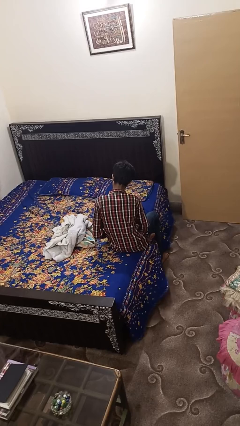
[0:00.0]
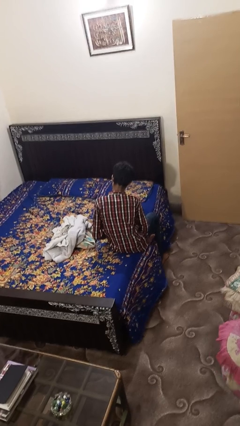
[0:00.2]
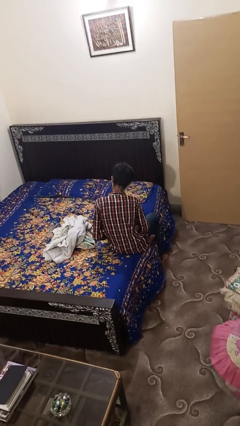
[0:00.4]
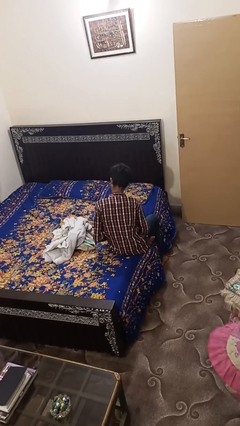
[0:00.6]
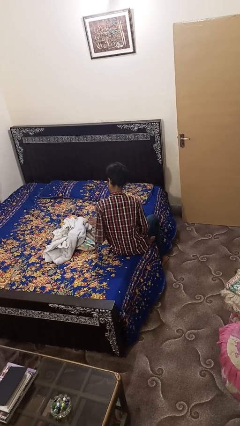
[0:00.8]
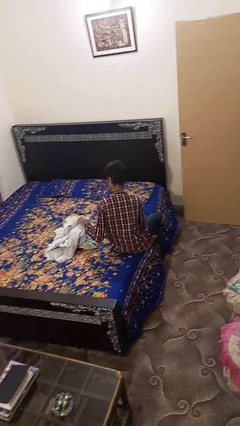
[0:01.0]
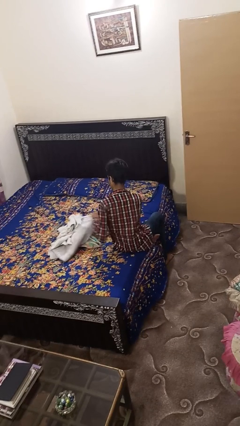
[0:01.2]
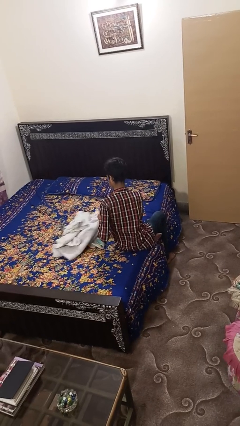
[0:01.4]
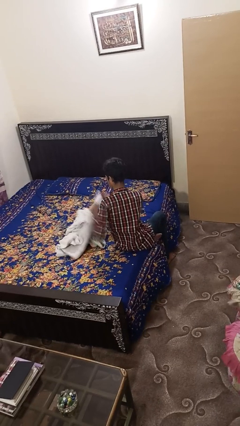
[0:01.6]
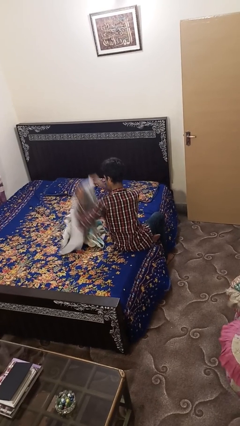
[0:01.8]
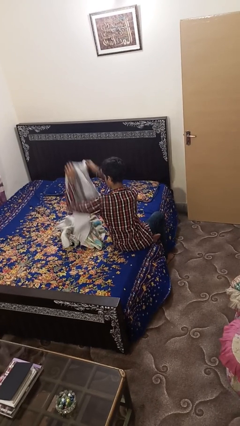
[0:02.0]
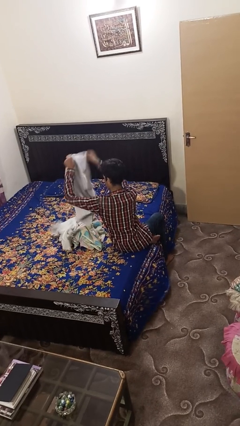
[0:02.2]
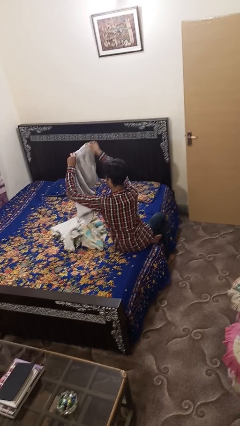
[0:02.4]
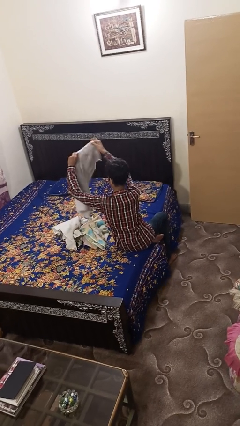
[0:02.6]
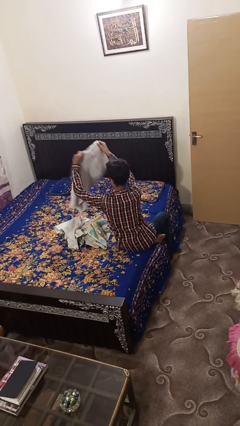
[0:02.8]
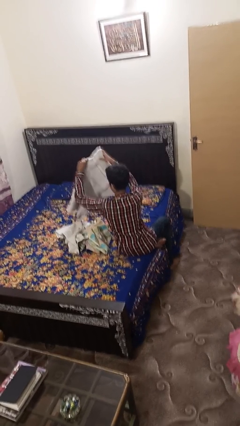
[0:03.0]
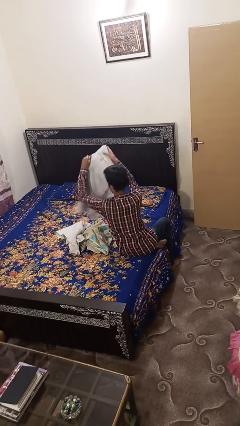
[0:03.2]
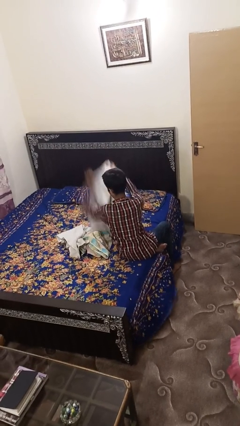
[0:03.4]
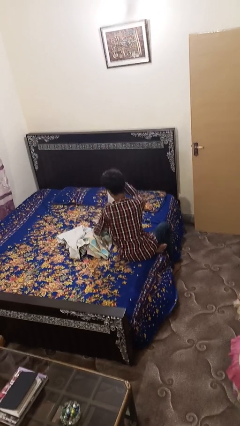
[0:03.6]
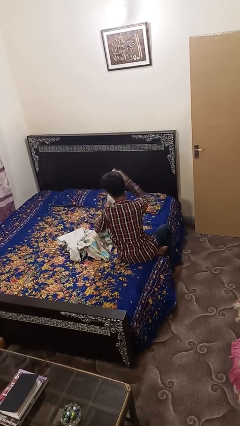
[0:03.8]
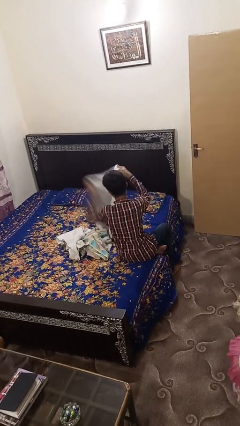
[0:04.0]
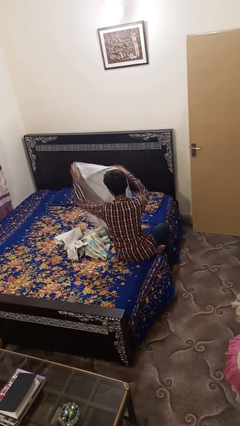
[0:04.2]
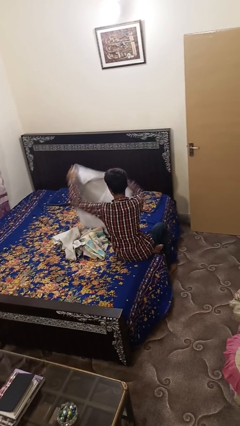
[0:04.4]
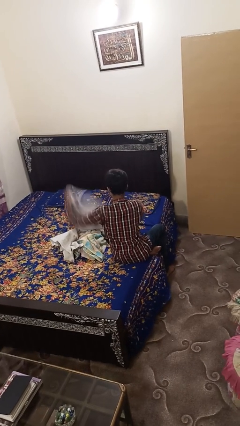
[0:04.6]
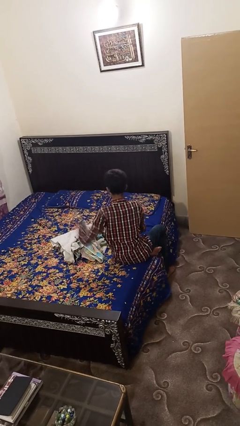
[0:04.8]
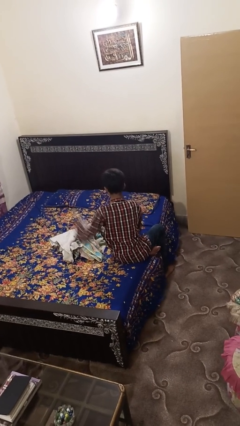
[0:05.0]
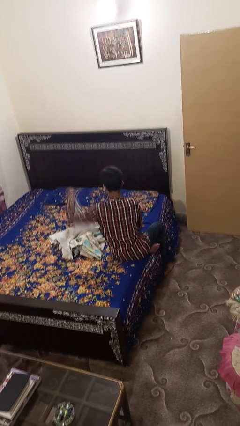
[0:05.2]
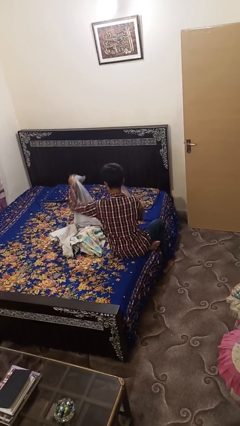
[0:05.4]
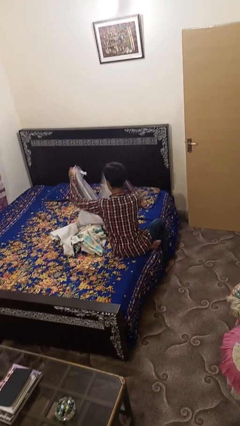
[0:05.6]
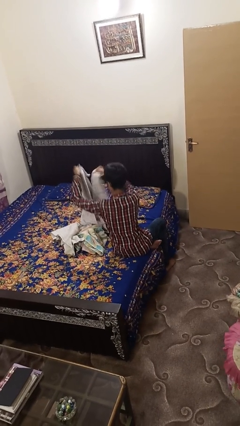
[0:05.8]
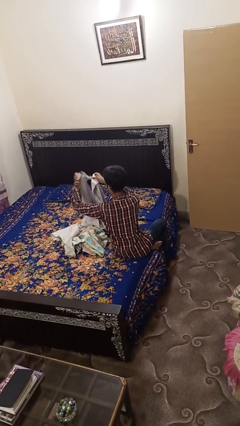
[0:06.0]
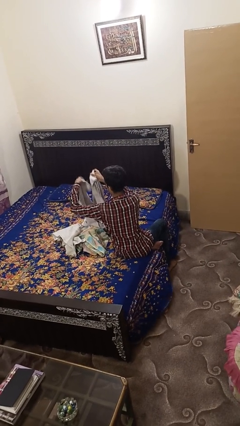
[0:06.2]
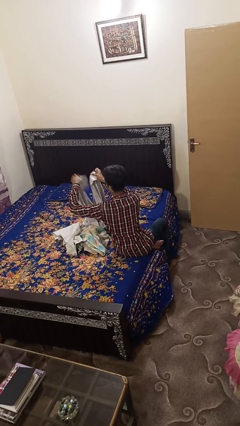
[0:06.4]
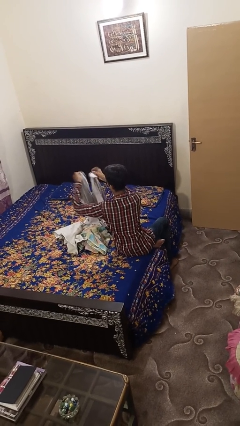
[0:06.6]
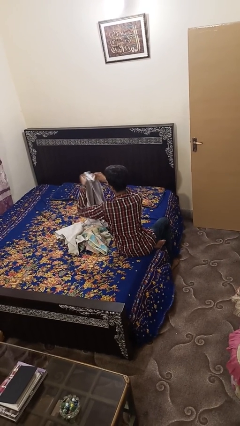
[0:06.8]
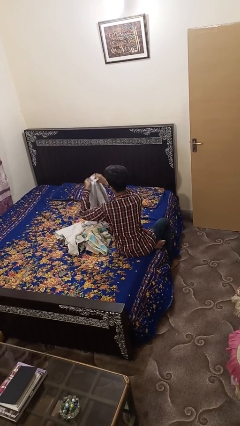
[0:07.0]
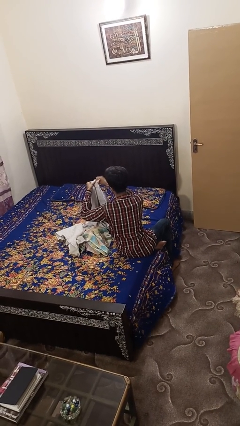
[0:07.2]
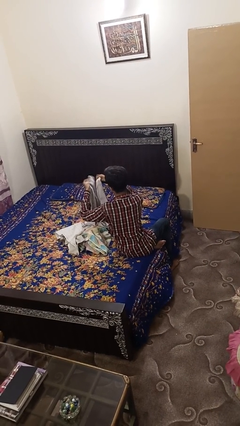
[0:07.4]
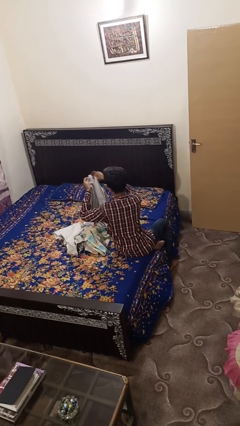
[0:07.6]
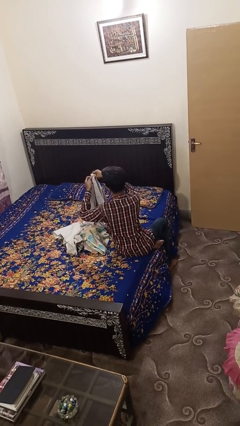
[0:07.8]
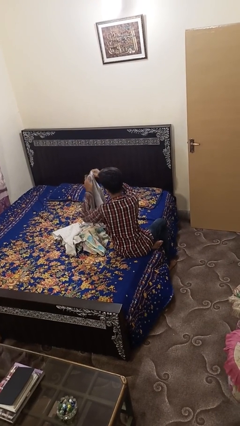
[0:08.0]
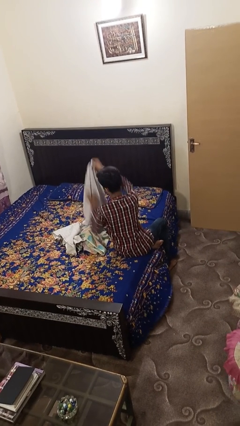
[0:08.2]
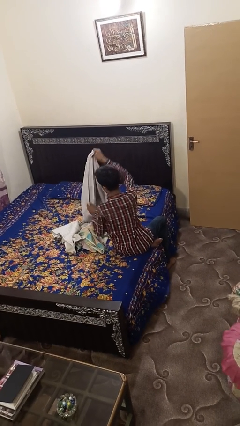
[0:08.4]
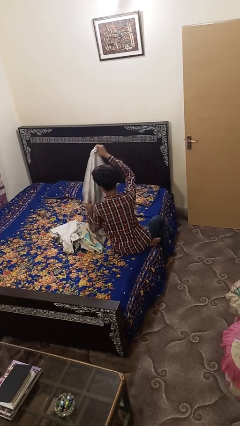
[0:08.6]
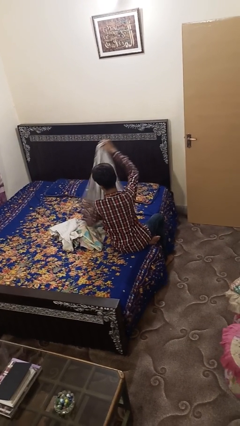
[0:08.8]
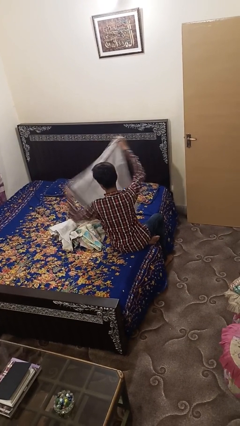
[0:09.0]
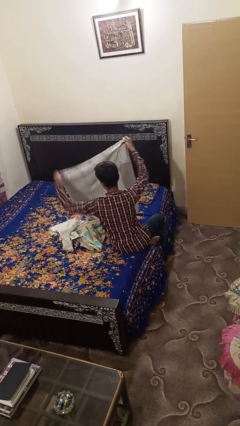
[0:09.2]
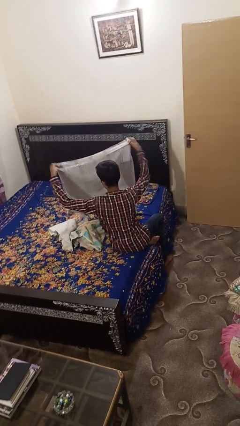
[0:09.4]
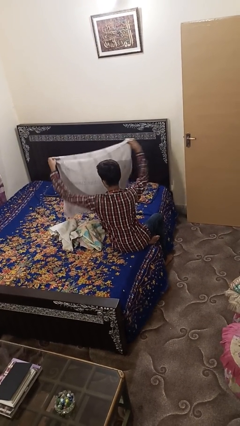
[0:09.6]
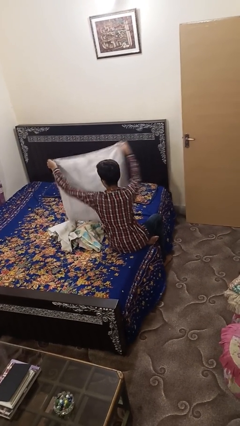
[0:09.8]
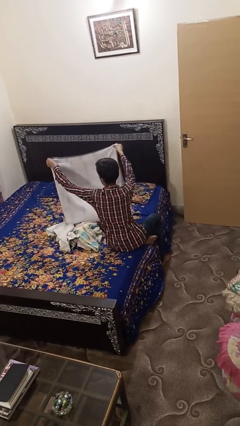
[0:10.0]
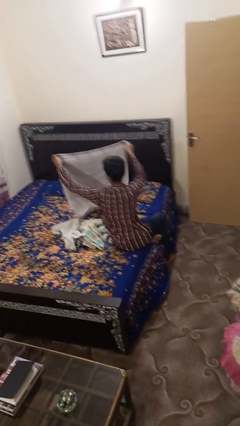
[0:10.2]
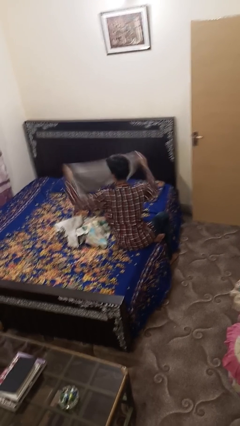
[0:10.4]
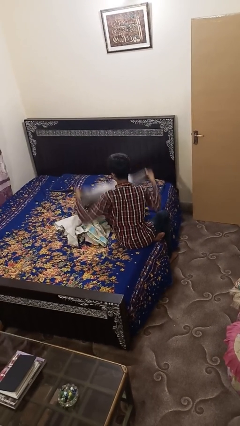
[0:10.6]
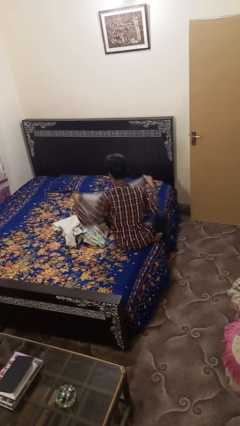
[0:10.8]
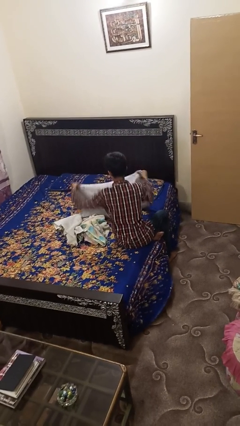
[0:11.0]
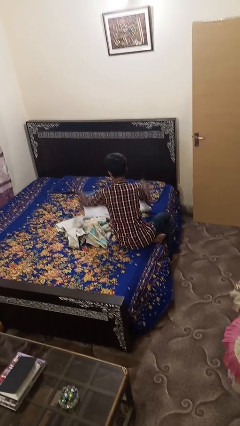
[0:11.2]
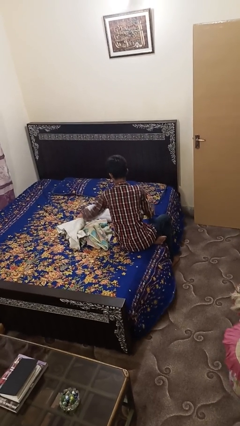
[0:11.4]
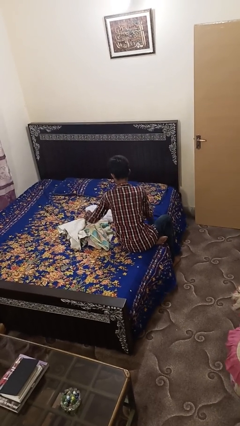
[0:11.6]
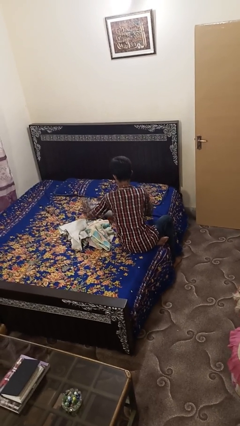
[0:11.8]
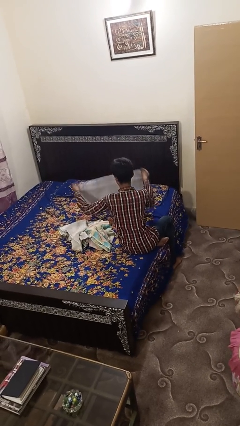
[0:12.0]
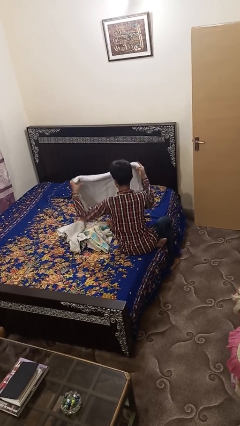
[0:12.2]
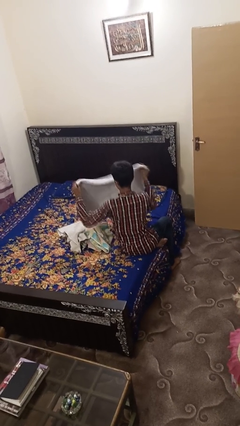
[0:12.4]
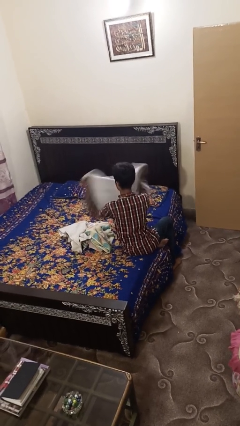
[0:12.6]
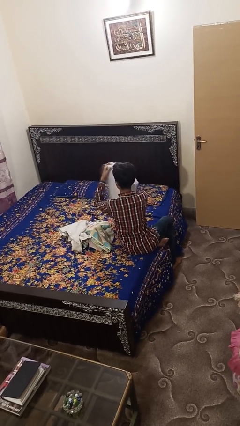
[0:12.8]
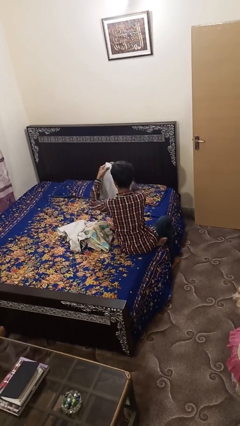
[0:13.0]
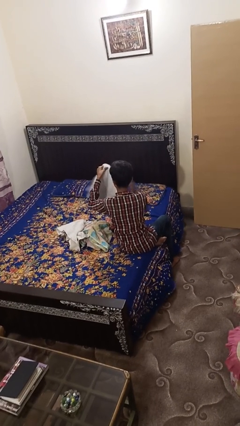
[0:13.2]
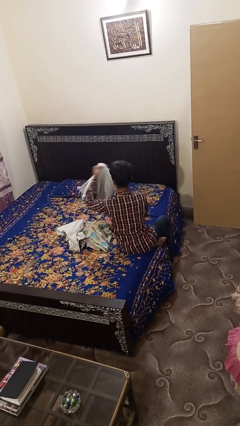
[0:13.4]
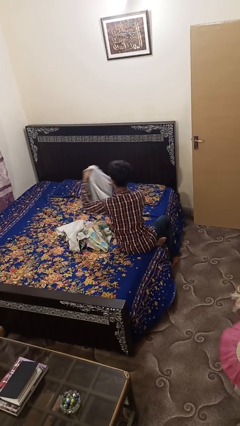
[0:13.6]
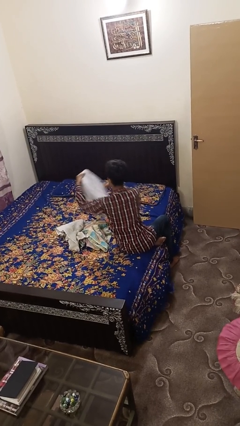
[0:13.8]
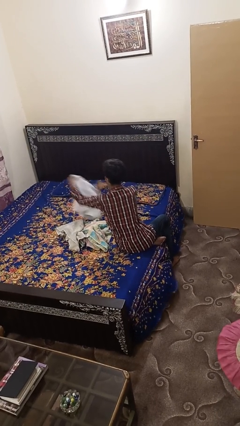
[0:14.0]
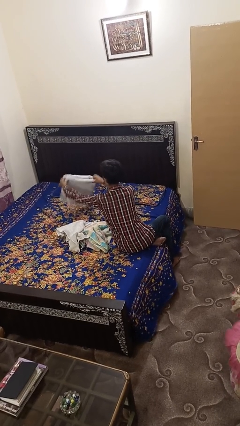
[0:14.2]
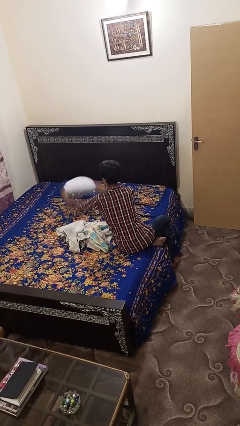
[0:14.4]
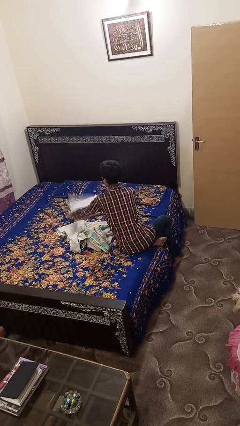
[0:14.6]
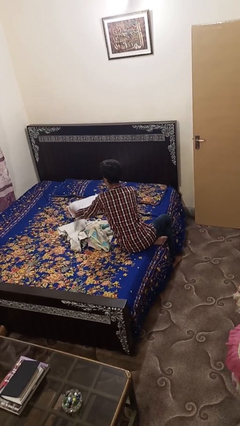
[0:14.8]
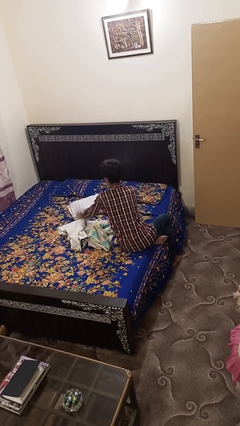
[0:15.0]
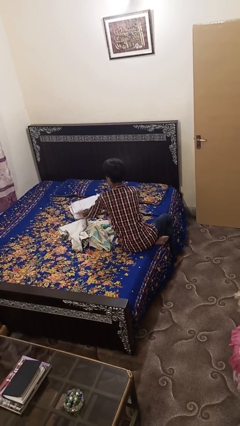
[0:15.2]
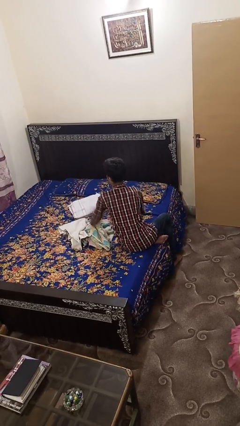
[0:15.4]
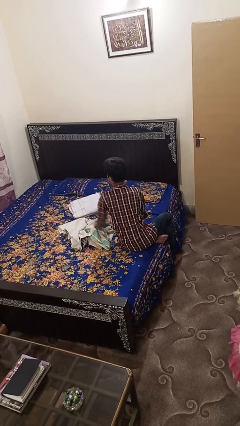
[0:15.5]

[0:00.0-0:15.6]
person folds towel

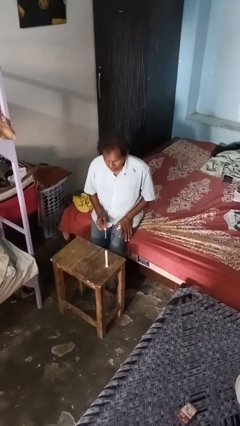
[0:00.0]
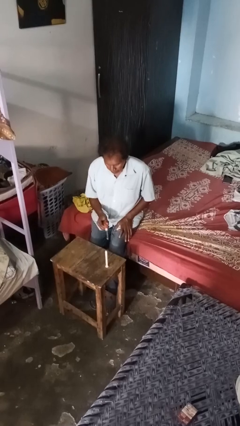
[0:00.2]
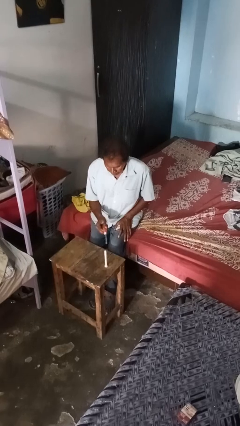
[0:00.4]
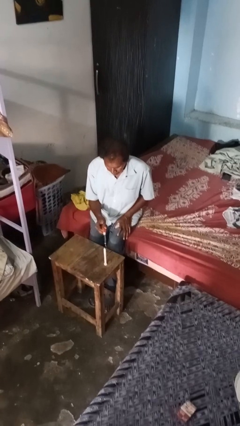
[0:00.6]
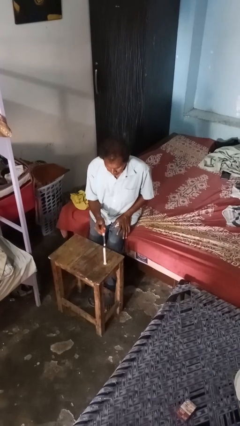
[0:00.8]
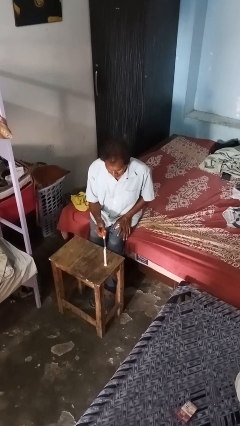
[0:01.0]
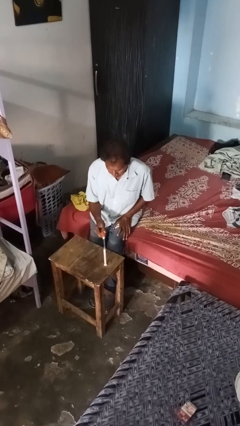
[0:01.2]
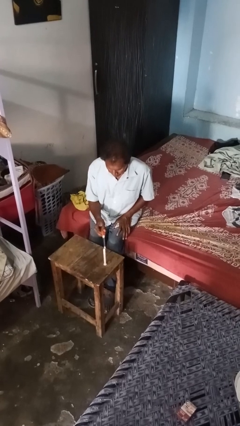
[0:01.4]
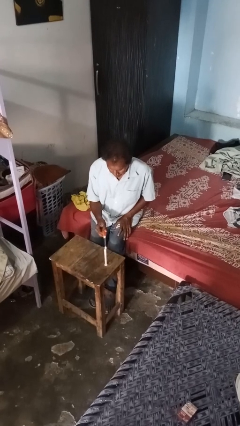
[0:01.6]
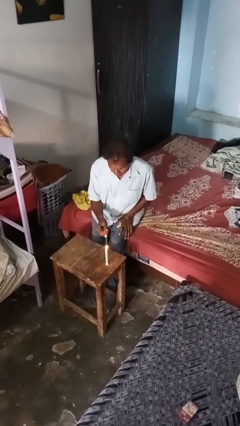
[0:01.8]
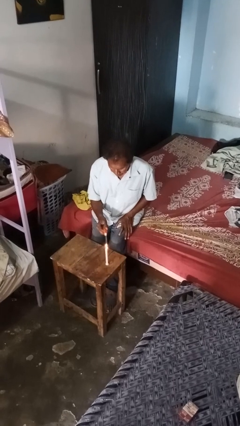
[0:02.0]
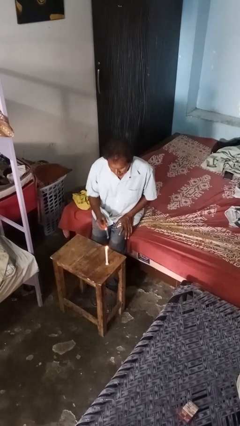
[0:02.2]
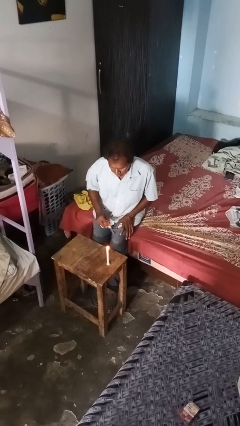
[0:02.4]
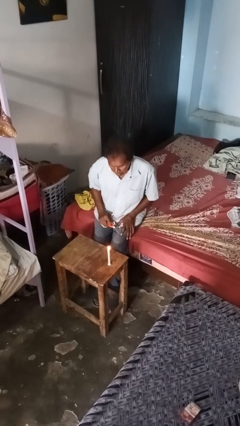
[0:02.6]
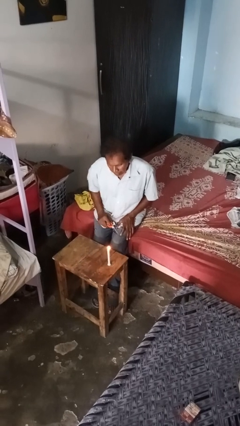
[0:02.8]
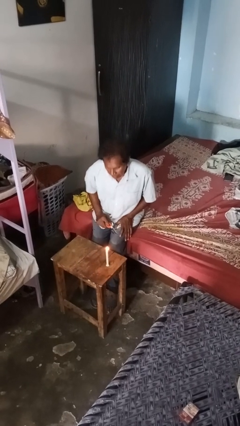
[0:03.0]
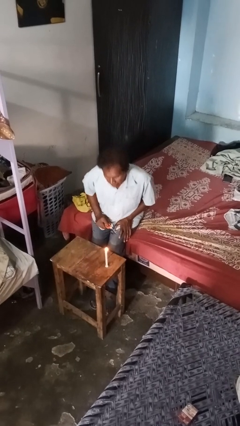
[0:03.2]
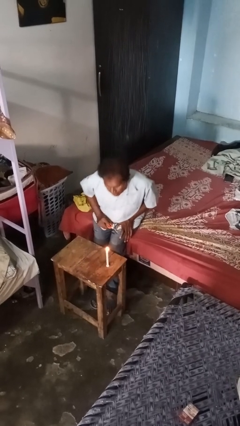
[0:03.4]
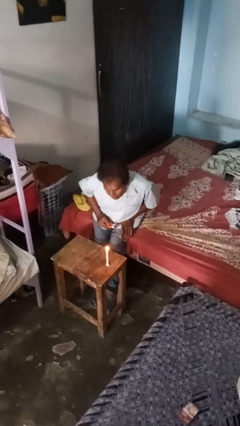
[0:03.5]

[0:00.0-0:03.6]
person lights candle
